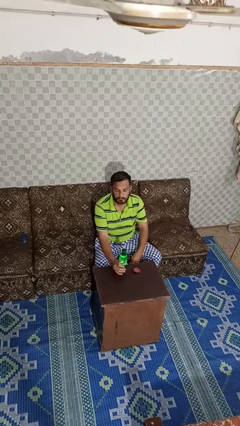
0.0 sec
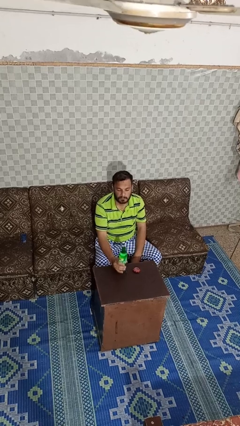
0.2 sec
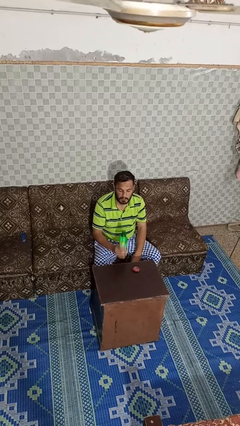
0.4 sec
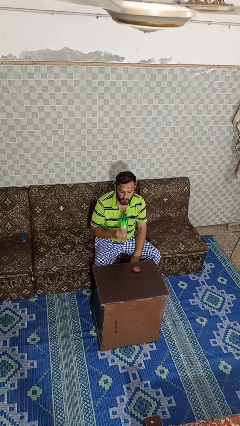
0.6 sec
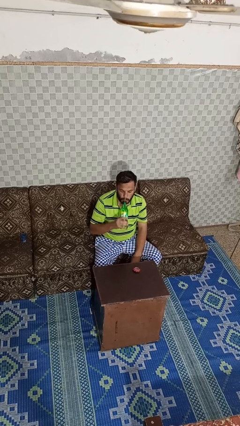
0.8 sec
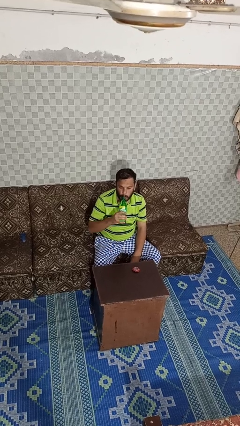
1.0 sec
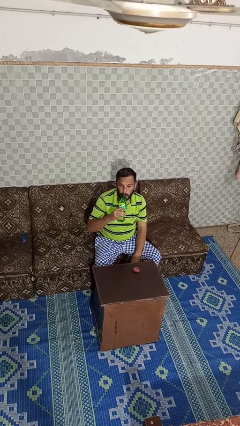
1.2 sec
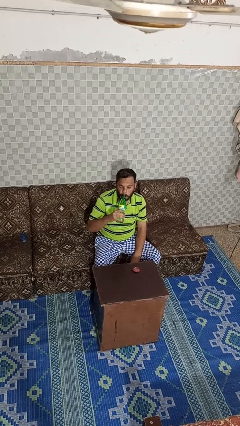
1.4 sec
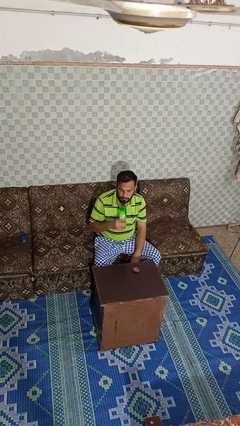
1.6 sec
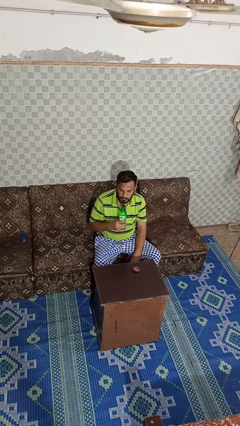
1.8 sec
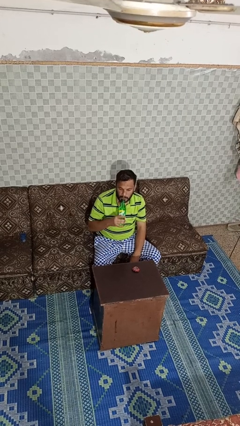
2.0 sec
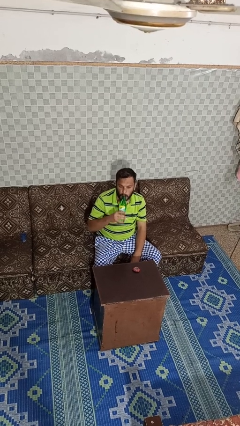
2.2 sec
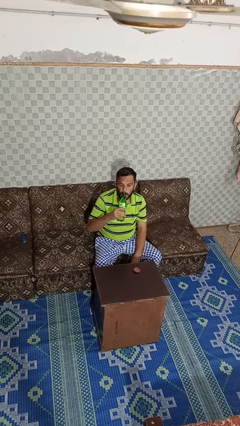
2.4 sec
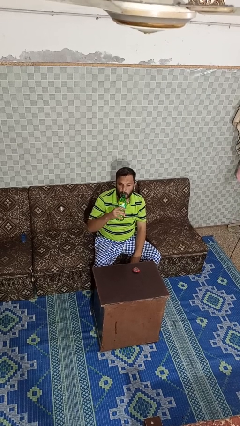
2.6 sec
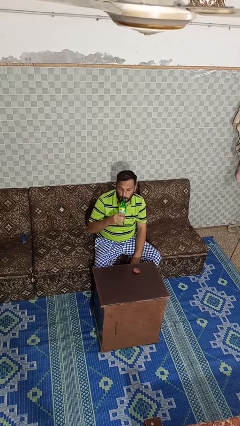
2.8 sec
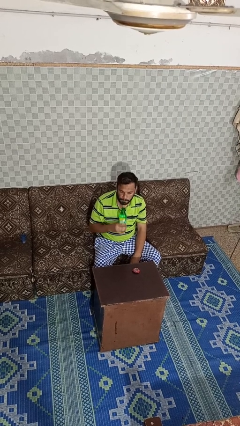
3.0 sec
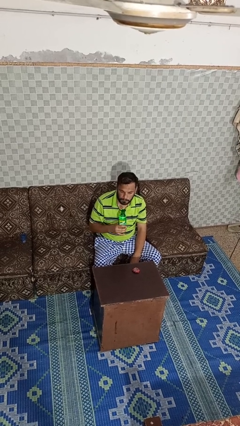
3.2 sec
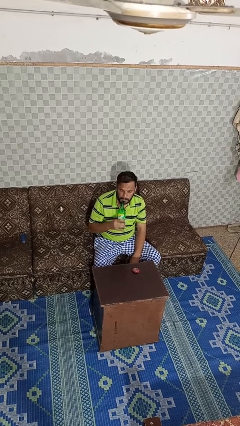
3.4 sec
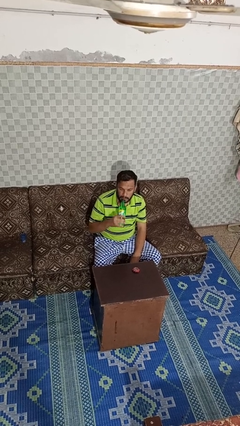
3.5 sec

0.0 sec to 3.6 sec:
person drinks from bottle

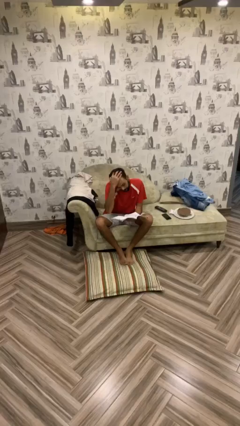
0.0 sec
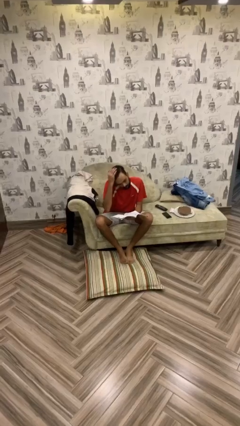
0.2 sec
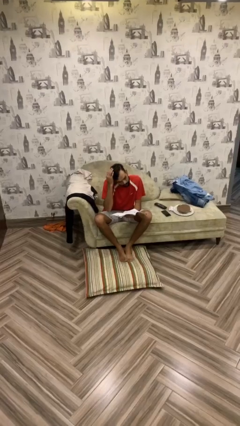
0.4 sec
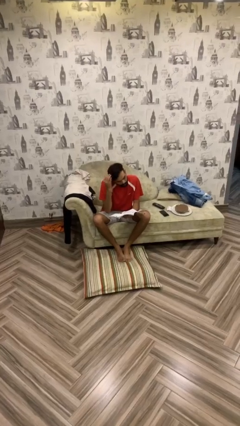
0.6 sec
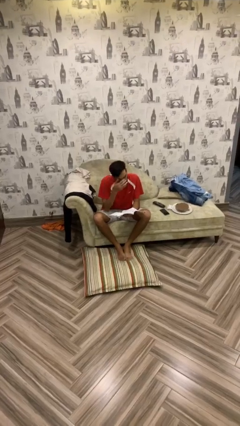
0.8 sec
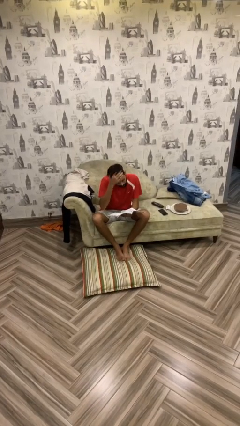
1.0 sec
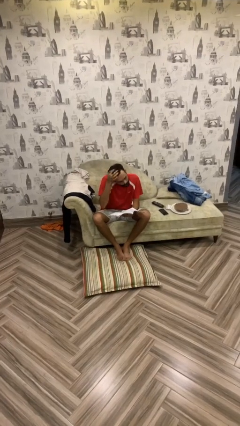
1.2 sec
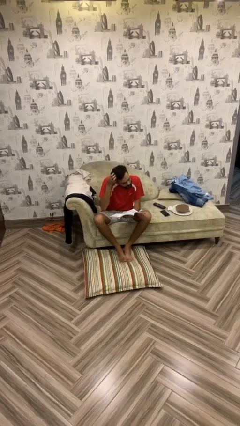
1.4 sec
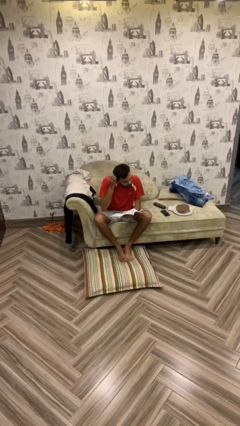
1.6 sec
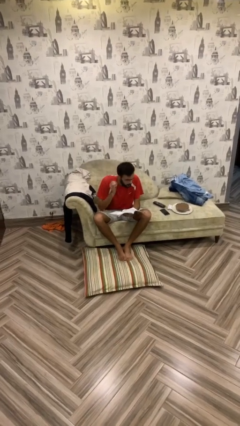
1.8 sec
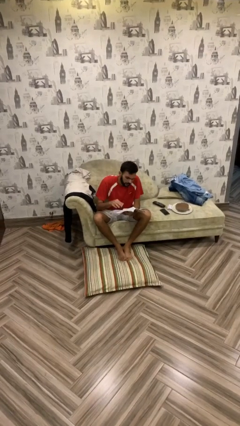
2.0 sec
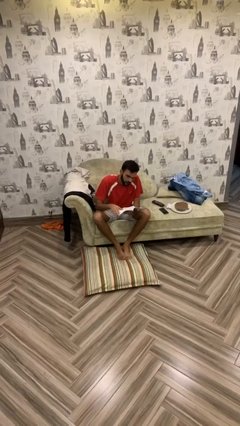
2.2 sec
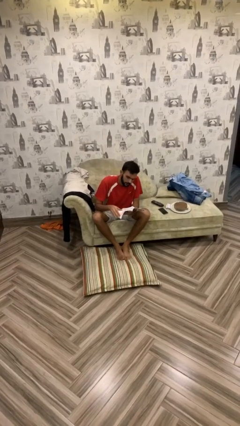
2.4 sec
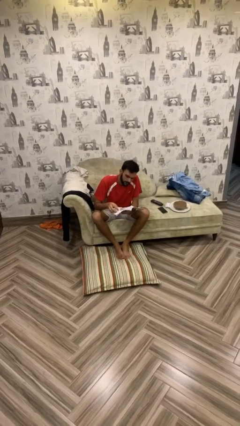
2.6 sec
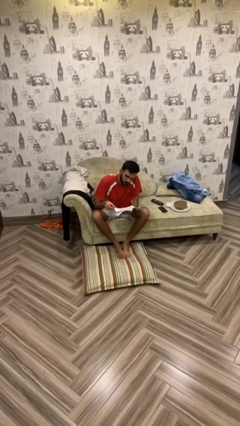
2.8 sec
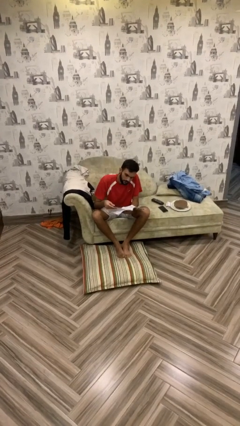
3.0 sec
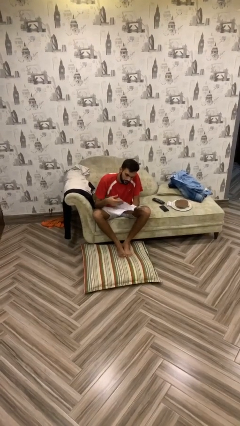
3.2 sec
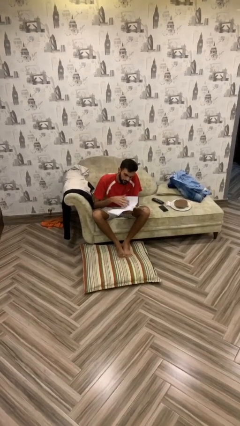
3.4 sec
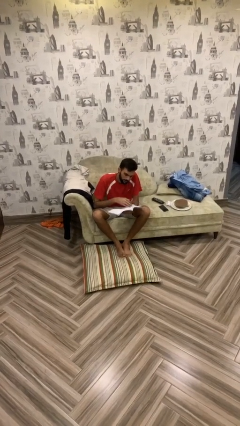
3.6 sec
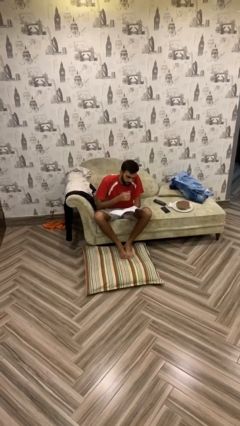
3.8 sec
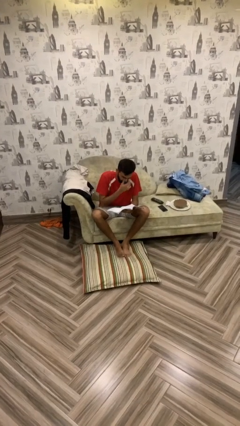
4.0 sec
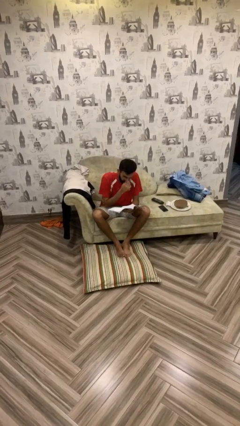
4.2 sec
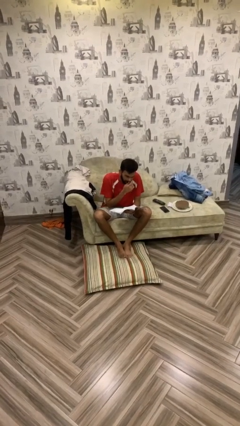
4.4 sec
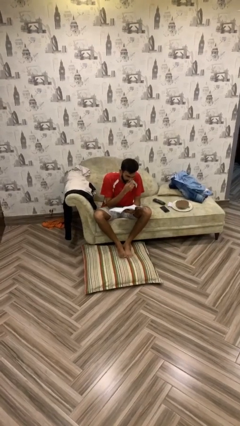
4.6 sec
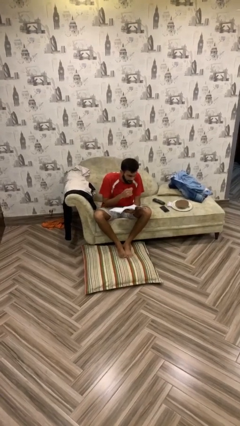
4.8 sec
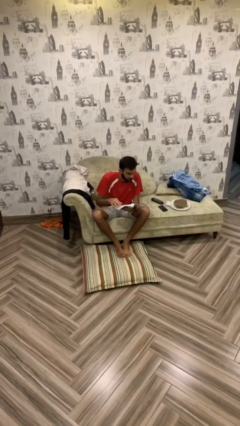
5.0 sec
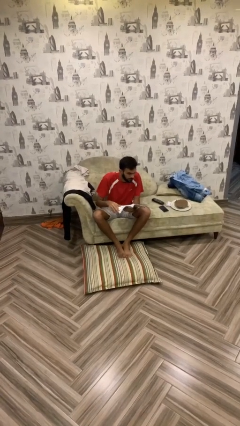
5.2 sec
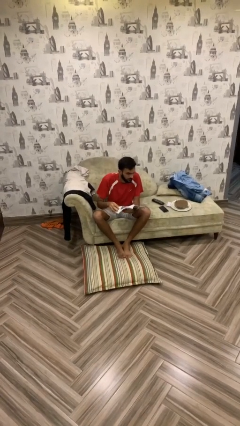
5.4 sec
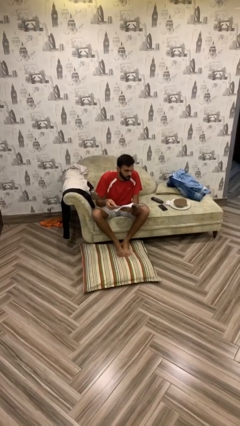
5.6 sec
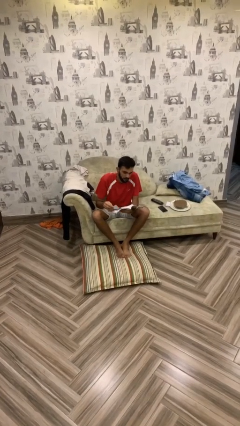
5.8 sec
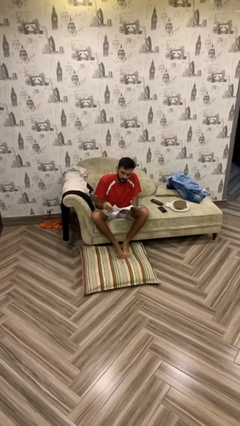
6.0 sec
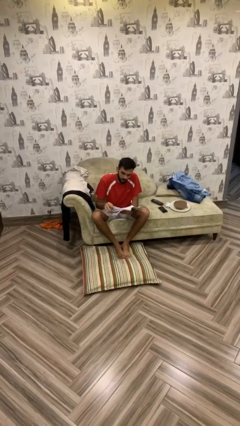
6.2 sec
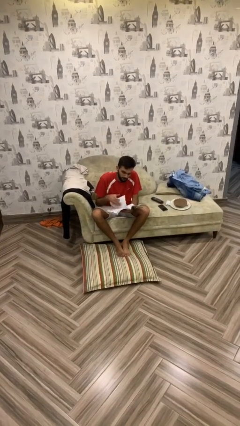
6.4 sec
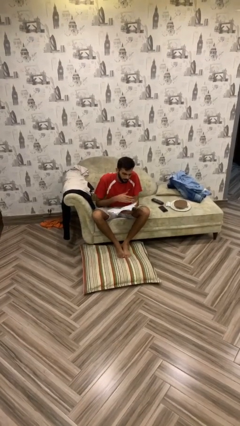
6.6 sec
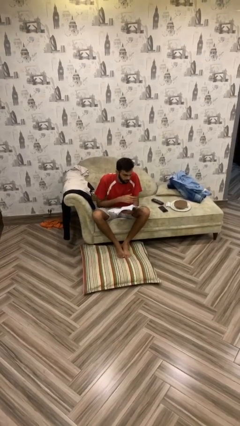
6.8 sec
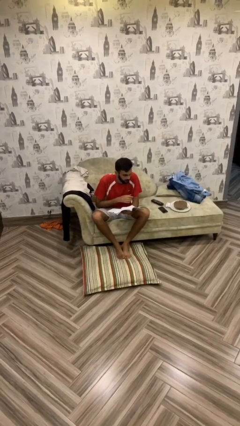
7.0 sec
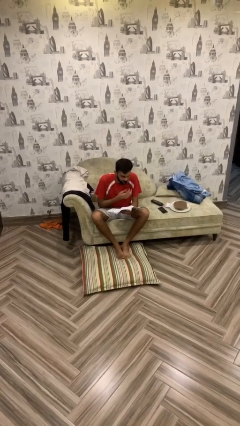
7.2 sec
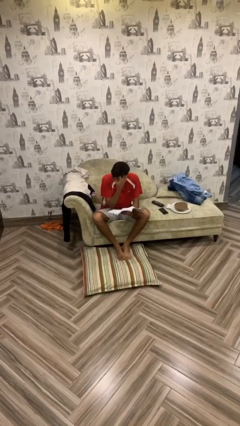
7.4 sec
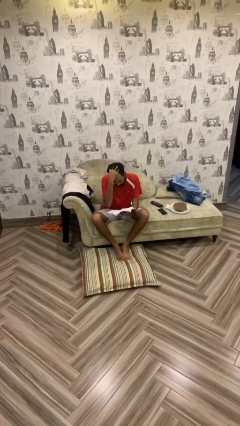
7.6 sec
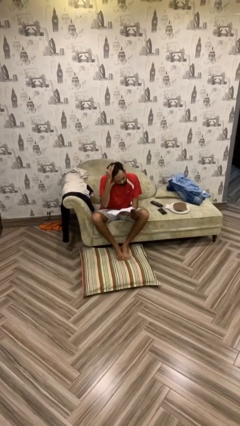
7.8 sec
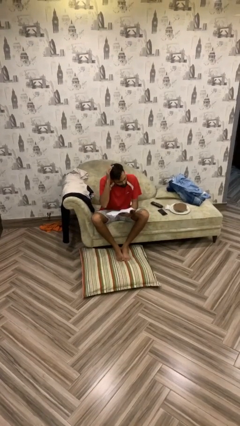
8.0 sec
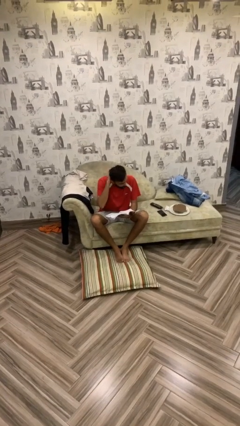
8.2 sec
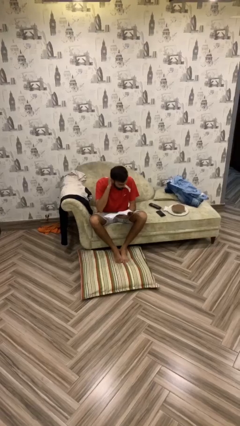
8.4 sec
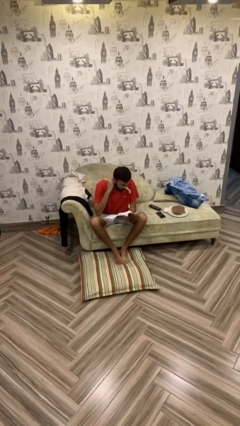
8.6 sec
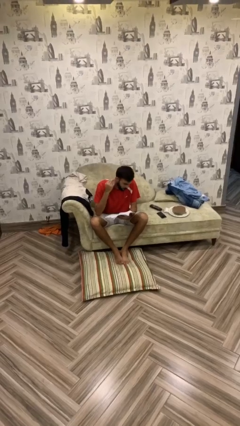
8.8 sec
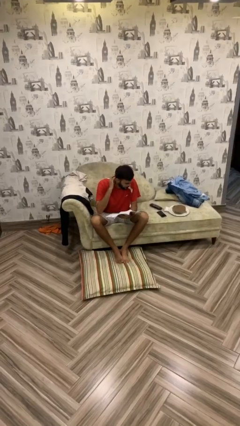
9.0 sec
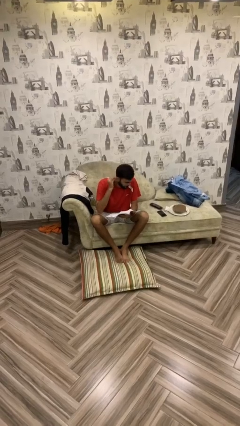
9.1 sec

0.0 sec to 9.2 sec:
person reads document

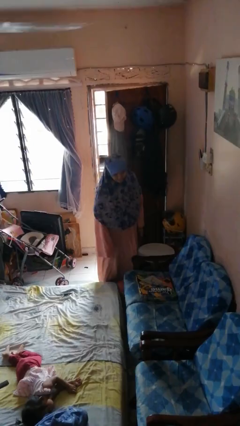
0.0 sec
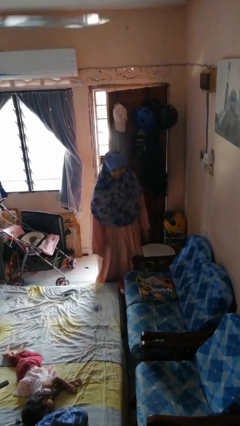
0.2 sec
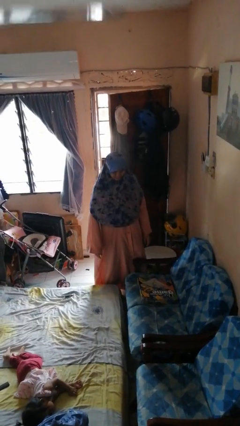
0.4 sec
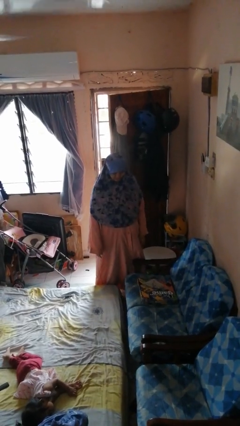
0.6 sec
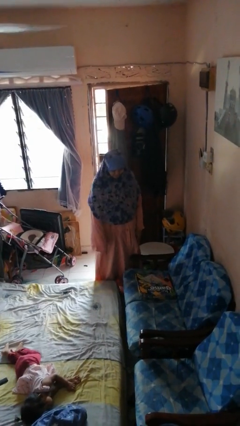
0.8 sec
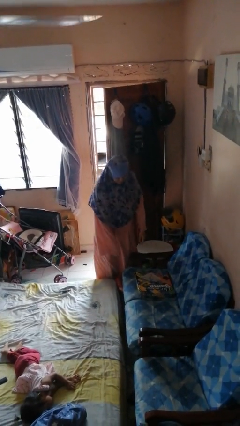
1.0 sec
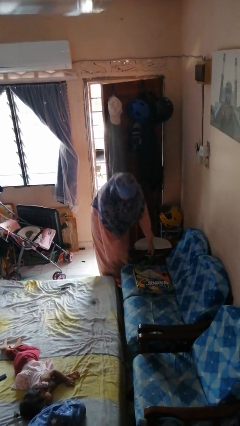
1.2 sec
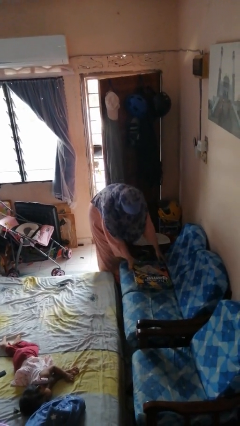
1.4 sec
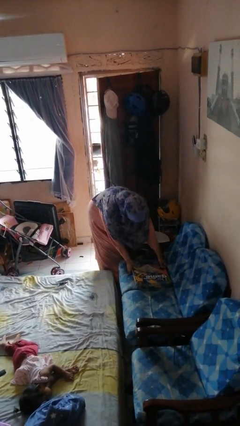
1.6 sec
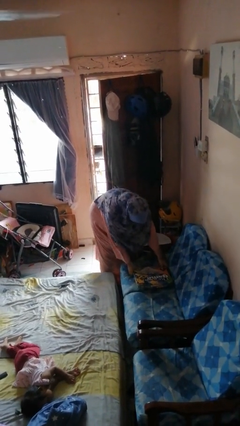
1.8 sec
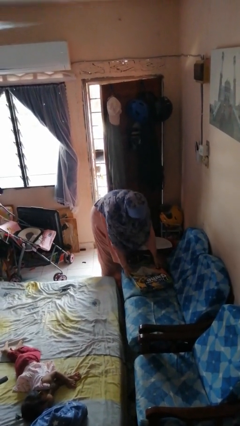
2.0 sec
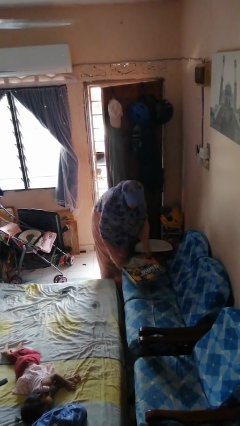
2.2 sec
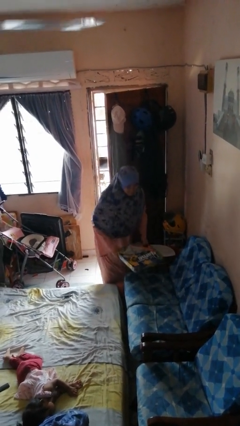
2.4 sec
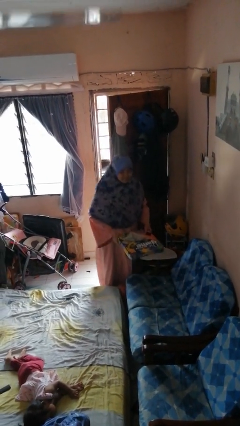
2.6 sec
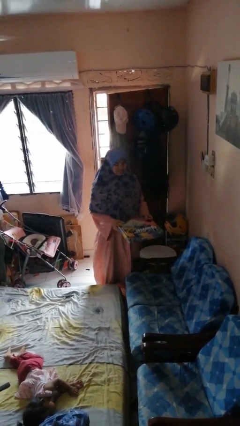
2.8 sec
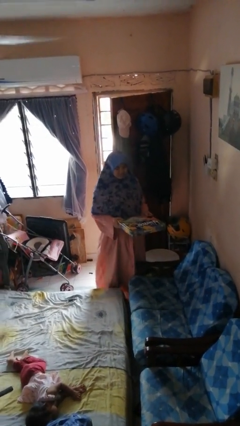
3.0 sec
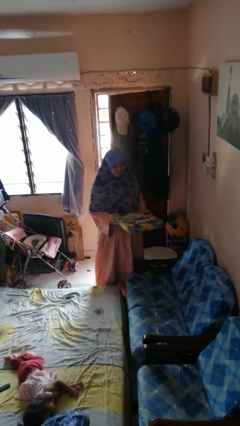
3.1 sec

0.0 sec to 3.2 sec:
person picks up object from couch

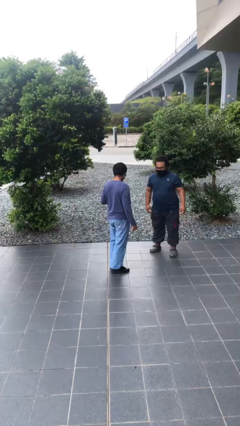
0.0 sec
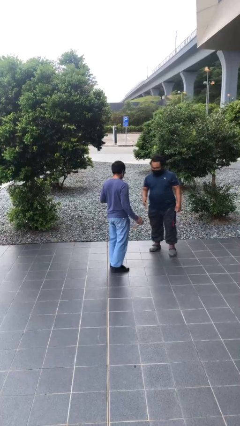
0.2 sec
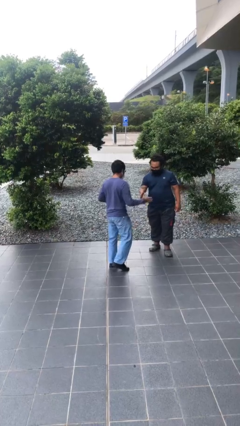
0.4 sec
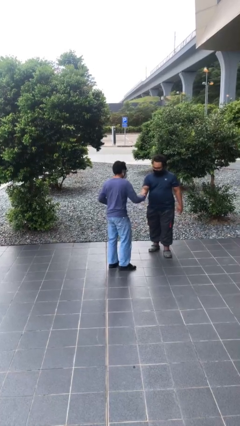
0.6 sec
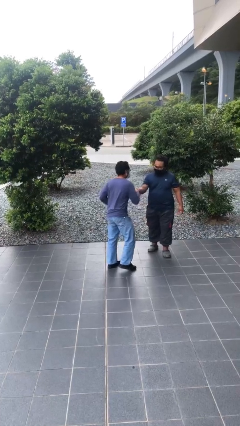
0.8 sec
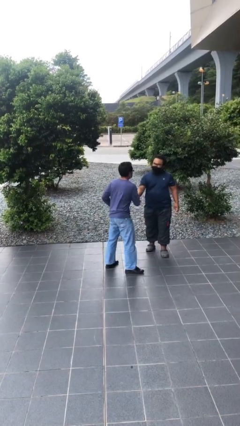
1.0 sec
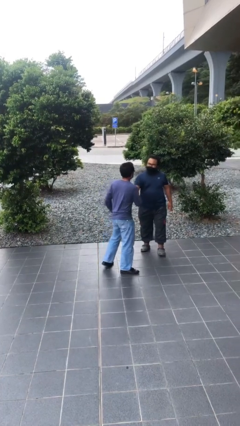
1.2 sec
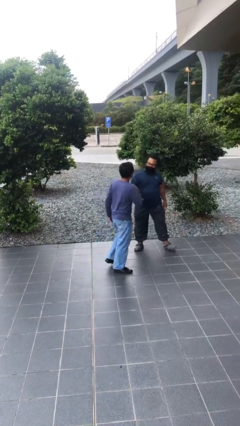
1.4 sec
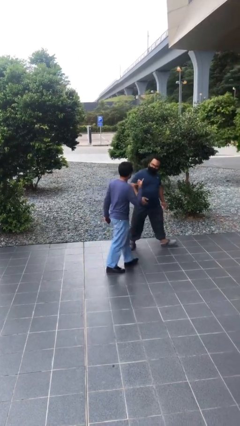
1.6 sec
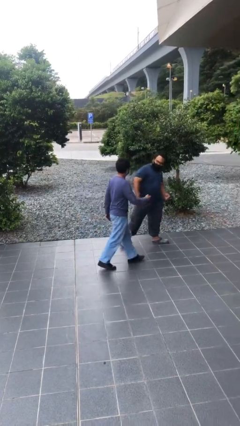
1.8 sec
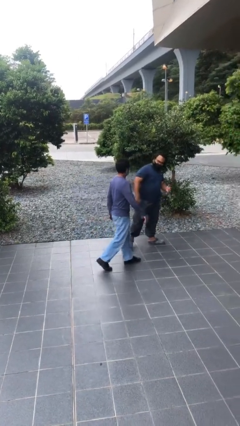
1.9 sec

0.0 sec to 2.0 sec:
person shakes hand
